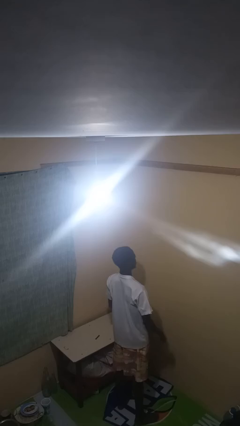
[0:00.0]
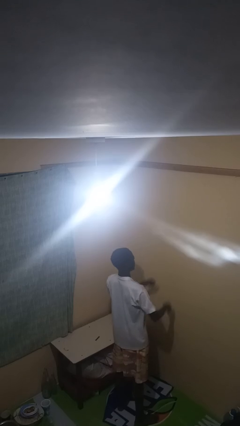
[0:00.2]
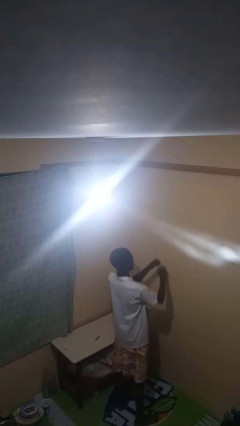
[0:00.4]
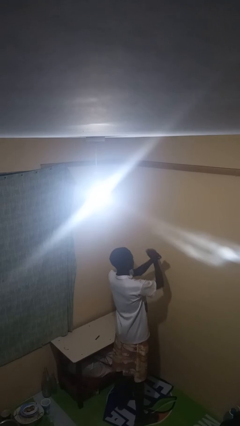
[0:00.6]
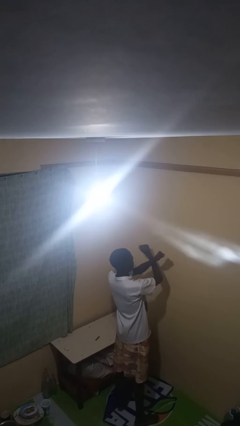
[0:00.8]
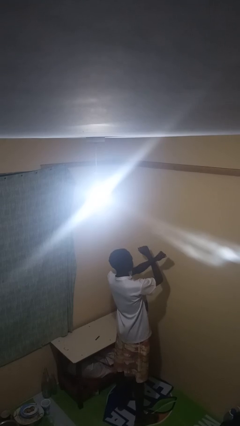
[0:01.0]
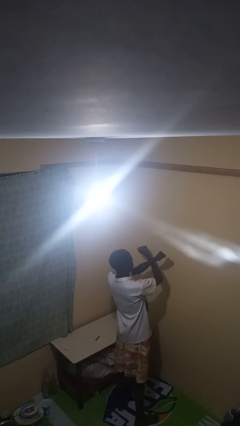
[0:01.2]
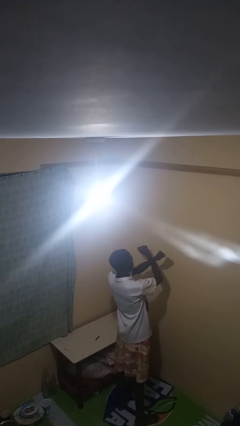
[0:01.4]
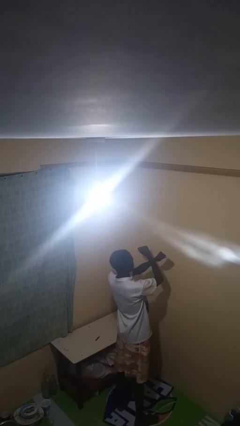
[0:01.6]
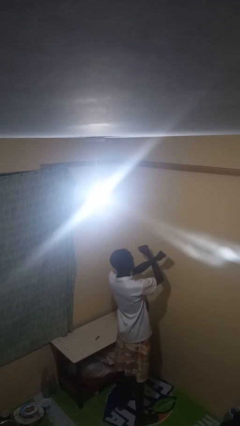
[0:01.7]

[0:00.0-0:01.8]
person gestures arms x

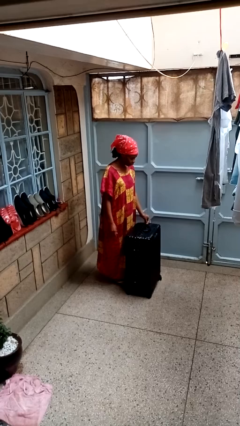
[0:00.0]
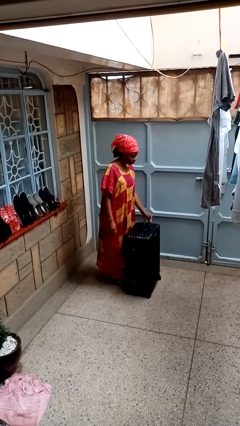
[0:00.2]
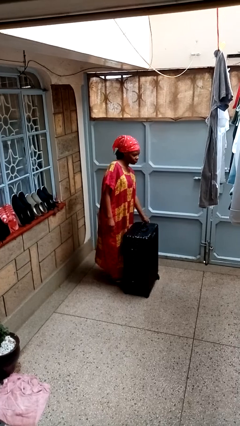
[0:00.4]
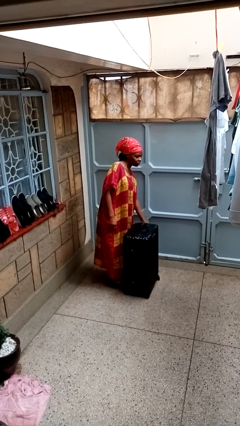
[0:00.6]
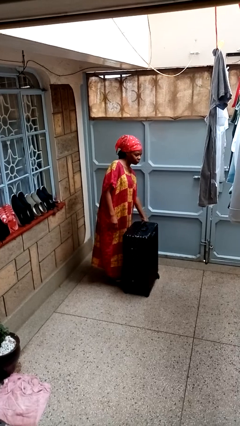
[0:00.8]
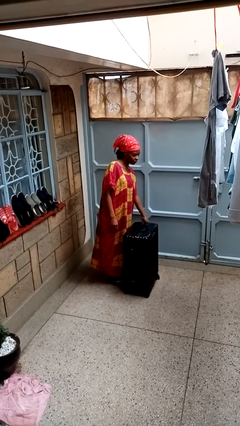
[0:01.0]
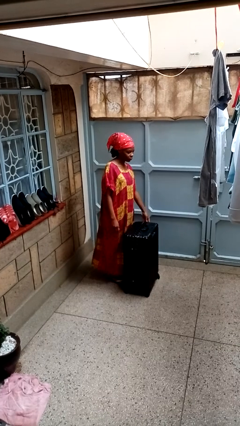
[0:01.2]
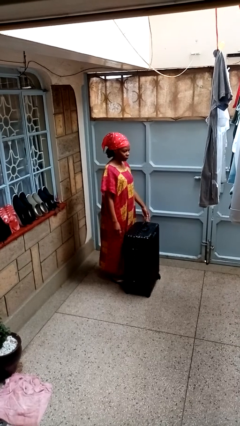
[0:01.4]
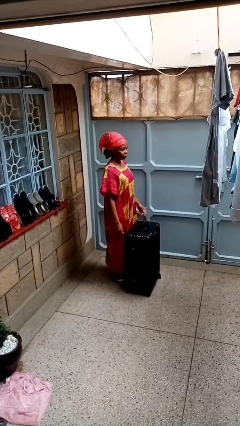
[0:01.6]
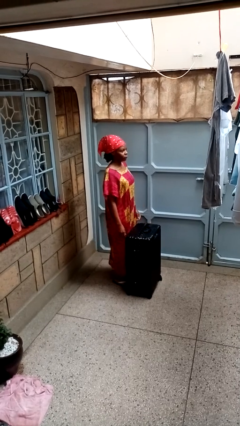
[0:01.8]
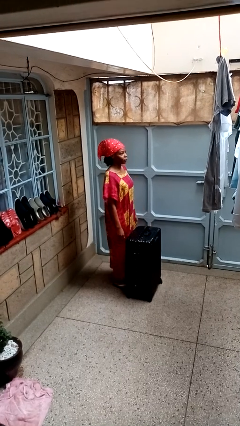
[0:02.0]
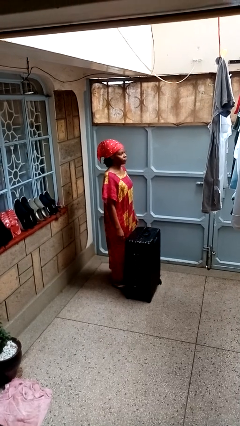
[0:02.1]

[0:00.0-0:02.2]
person closes suitcase

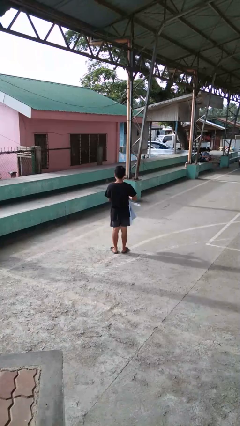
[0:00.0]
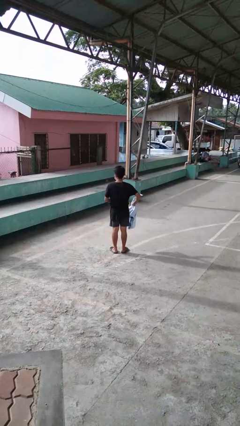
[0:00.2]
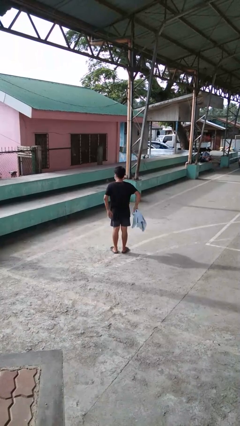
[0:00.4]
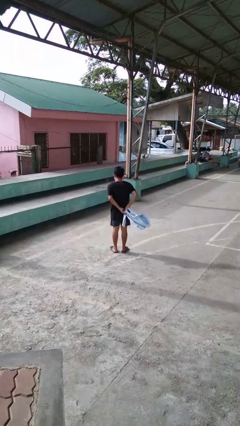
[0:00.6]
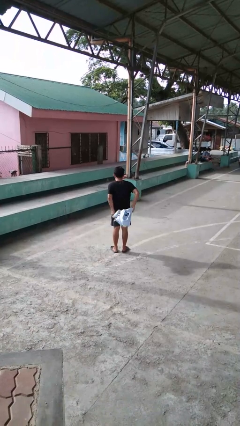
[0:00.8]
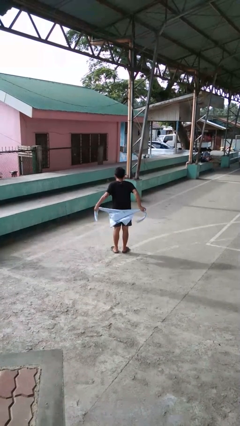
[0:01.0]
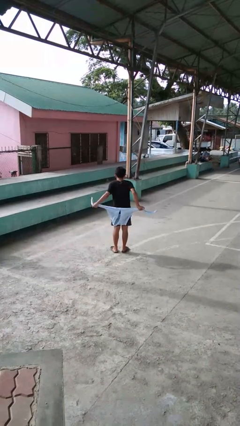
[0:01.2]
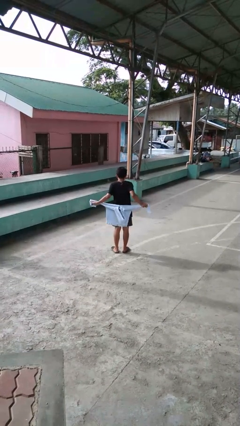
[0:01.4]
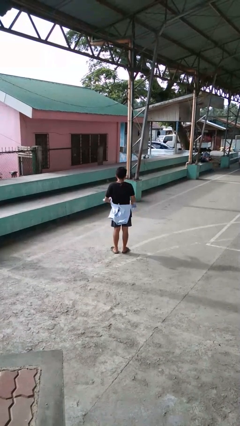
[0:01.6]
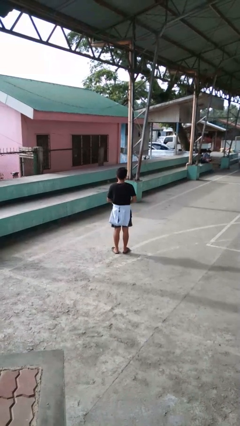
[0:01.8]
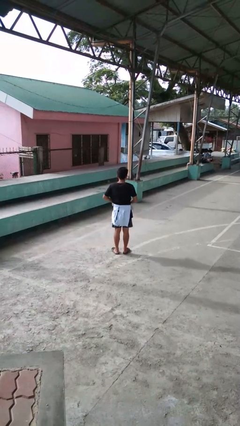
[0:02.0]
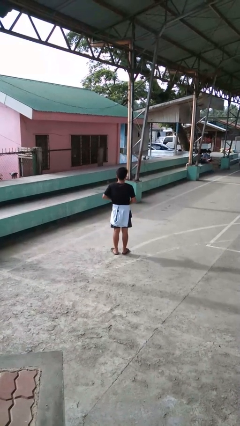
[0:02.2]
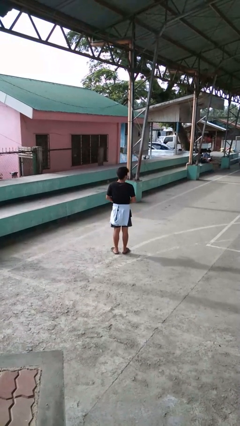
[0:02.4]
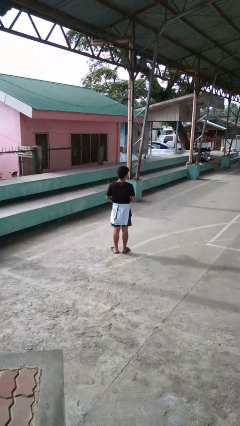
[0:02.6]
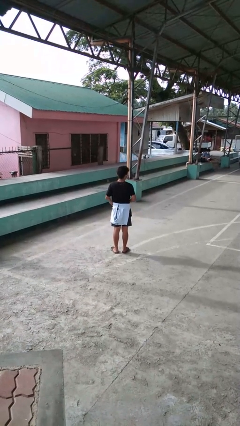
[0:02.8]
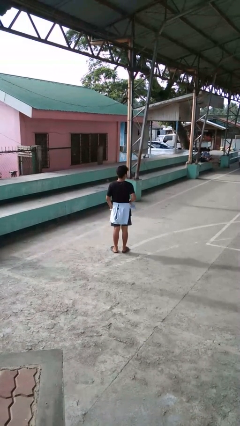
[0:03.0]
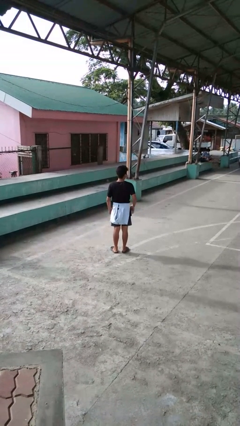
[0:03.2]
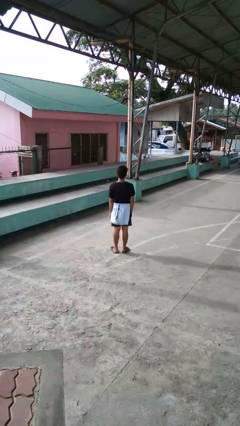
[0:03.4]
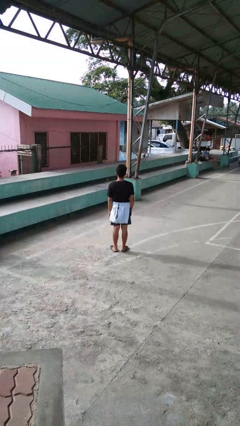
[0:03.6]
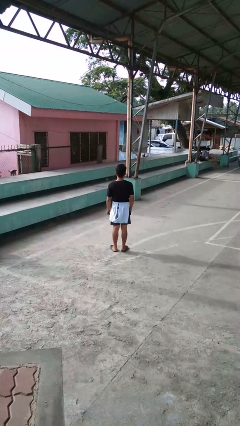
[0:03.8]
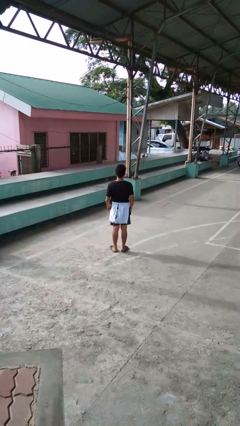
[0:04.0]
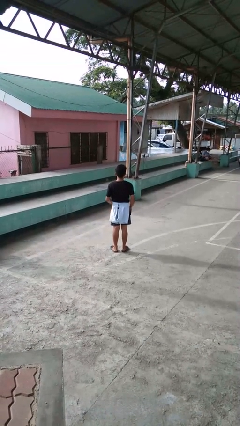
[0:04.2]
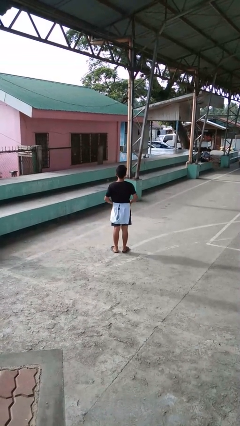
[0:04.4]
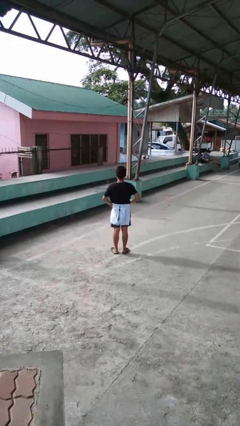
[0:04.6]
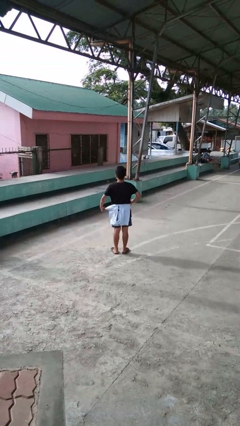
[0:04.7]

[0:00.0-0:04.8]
person ties jacket around waist

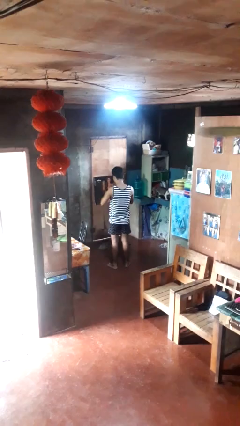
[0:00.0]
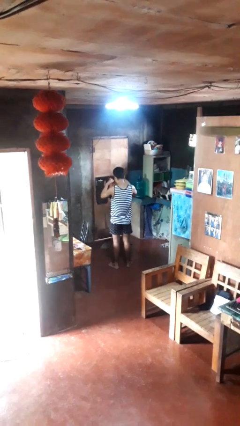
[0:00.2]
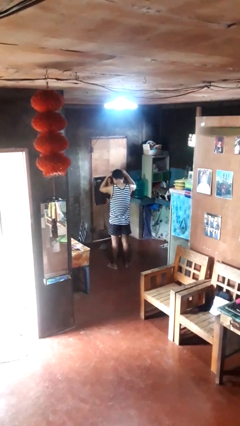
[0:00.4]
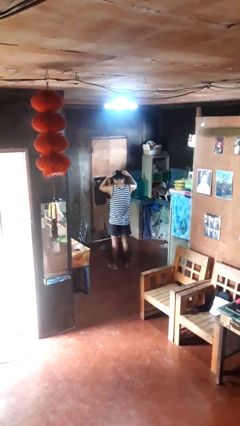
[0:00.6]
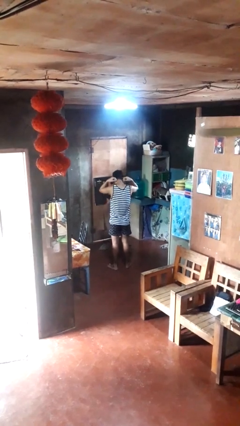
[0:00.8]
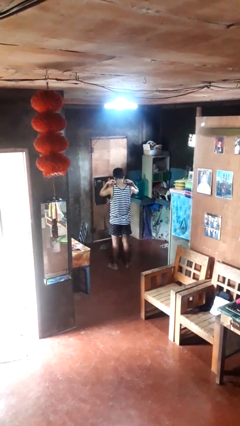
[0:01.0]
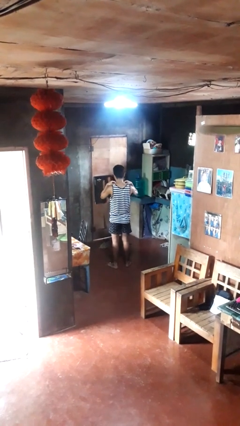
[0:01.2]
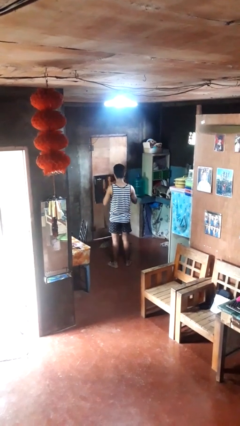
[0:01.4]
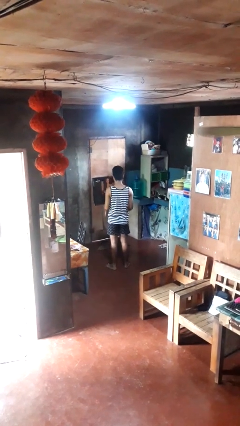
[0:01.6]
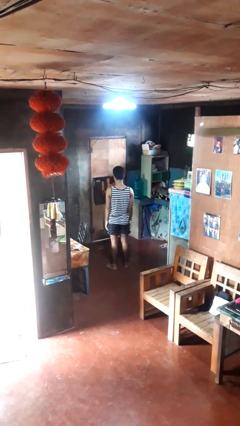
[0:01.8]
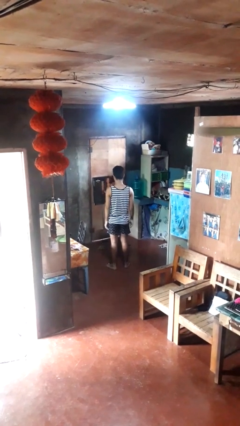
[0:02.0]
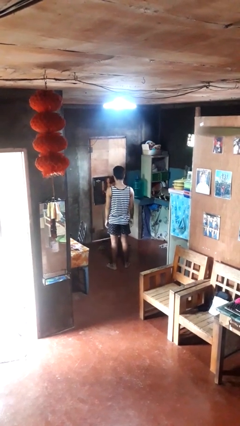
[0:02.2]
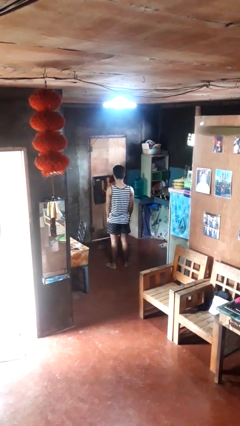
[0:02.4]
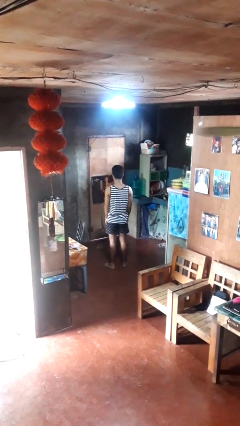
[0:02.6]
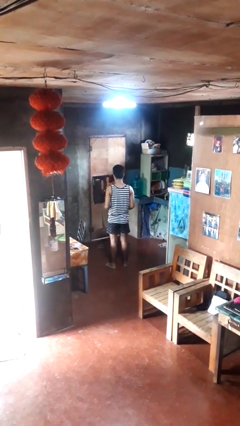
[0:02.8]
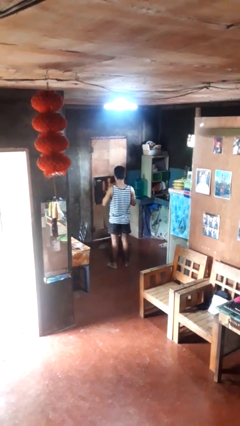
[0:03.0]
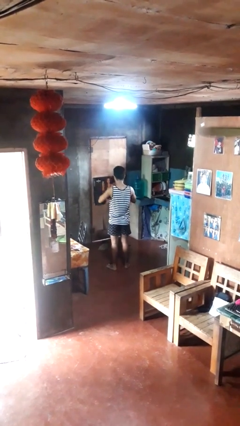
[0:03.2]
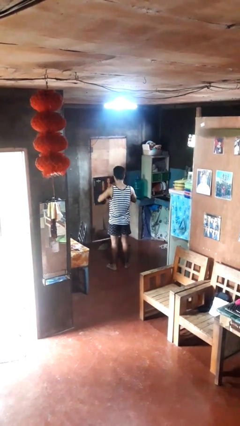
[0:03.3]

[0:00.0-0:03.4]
person puts on necklace

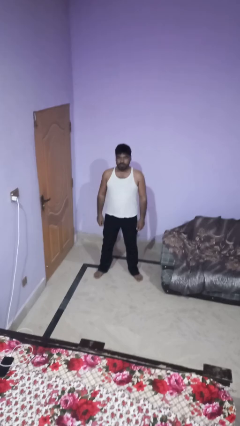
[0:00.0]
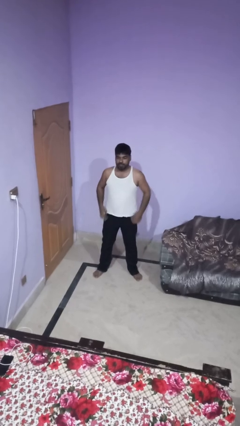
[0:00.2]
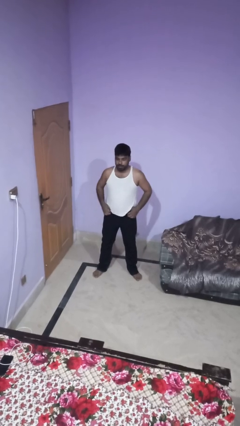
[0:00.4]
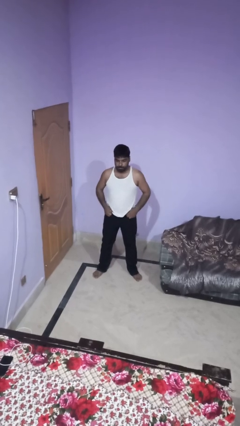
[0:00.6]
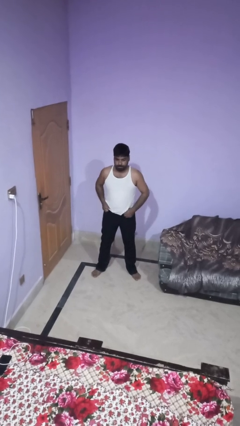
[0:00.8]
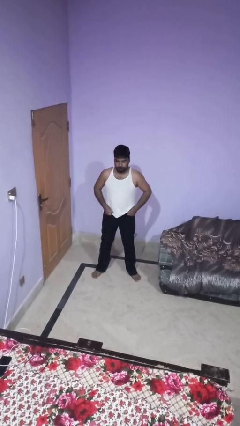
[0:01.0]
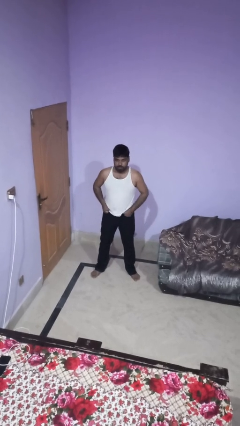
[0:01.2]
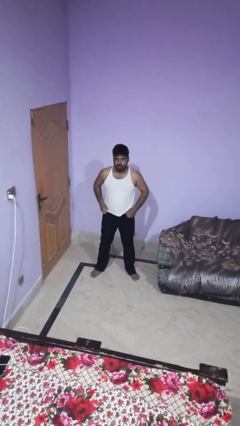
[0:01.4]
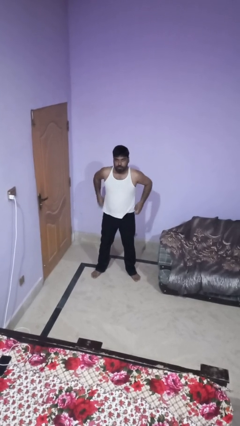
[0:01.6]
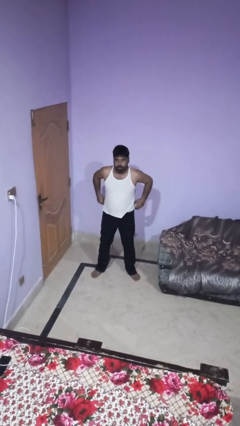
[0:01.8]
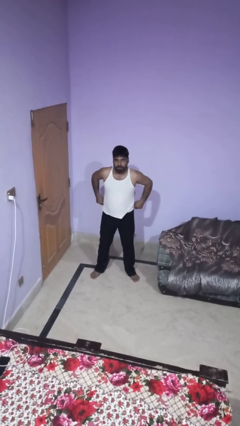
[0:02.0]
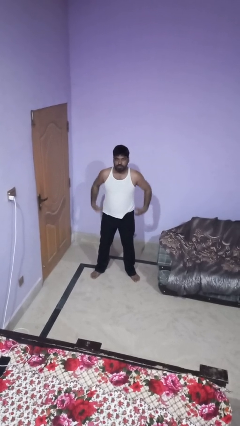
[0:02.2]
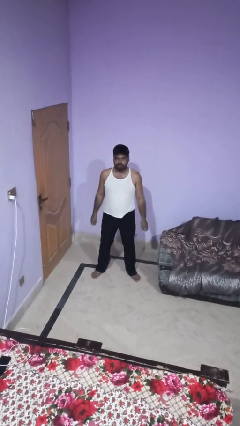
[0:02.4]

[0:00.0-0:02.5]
person hikes up pants

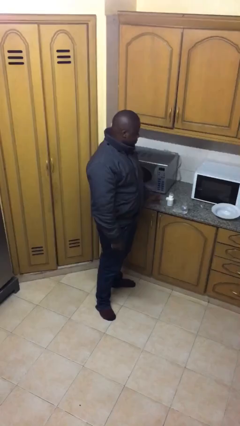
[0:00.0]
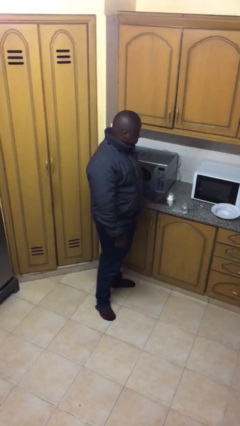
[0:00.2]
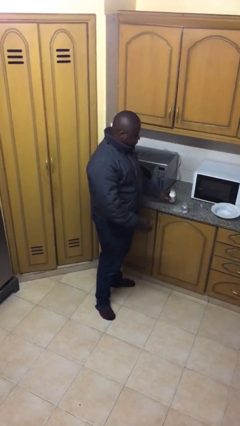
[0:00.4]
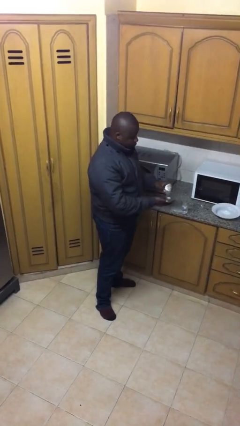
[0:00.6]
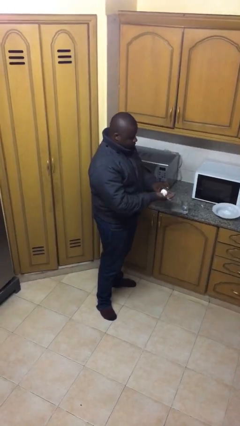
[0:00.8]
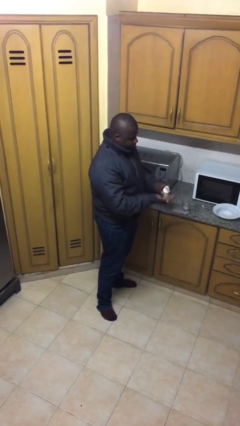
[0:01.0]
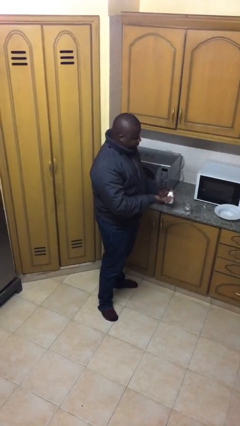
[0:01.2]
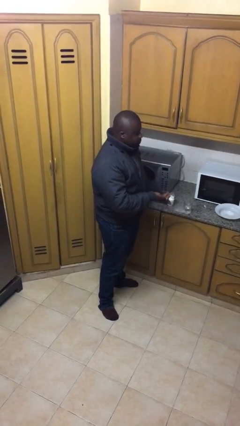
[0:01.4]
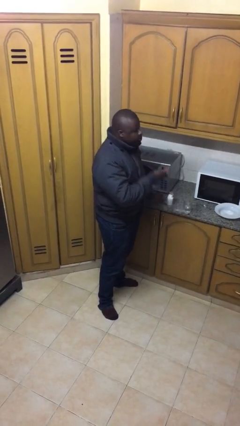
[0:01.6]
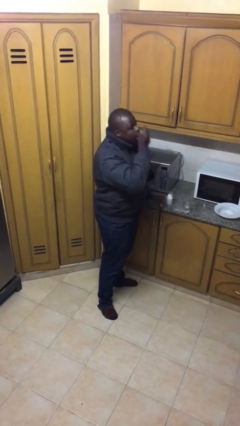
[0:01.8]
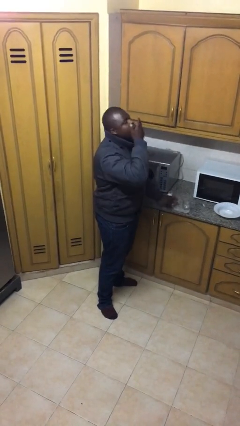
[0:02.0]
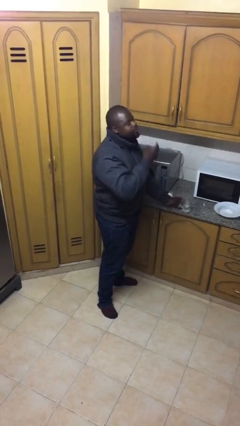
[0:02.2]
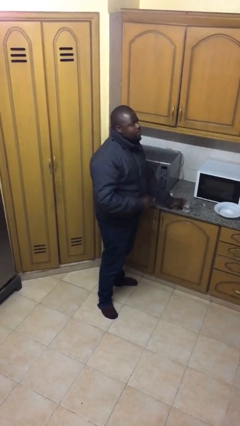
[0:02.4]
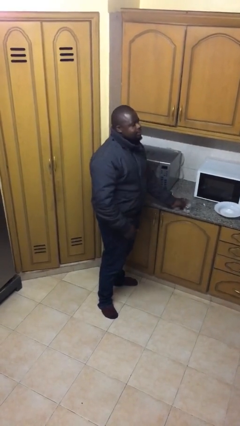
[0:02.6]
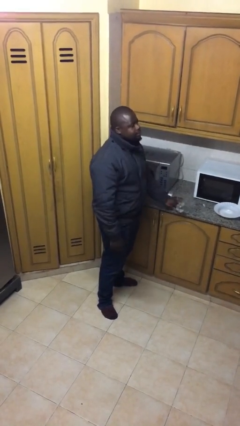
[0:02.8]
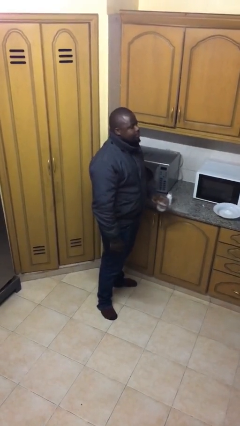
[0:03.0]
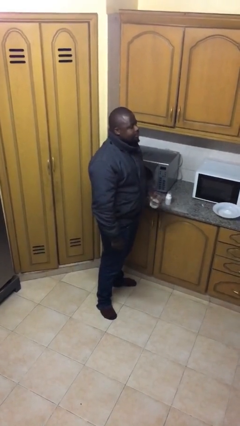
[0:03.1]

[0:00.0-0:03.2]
person takes medicine pills
